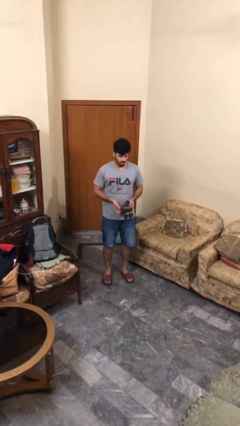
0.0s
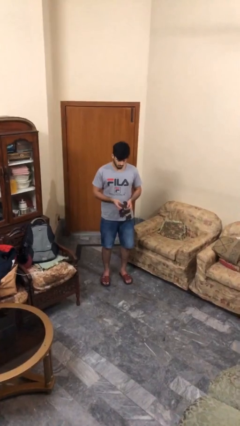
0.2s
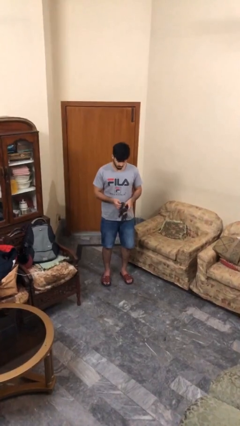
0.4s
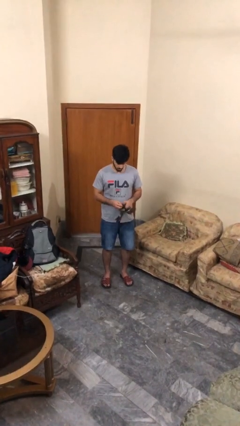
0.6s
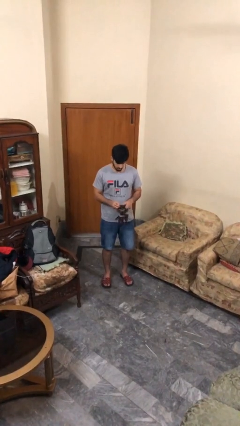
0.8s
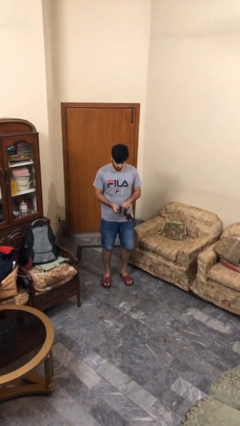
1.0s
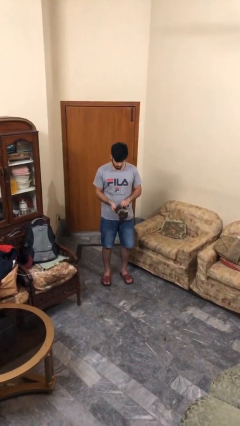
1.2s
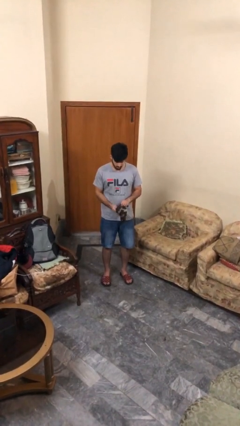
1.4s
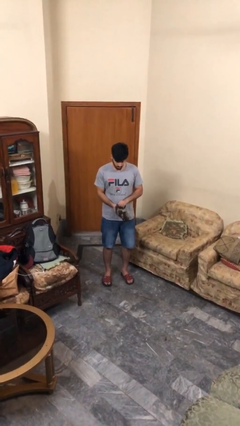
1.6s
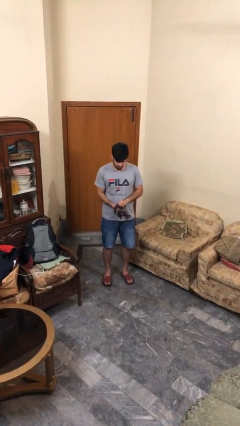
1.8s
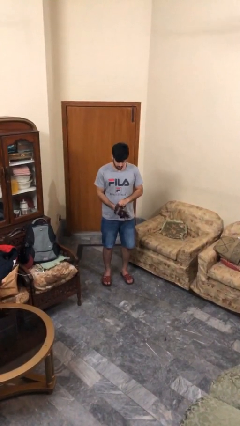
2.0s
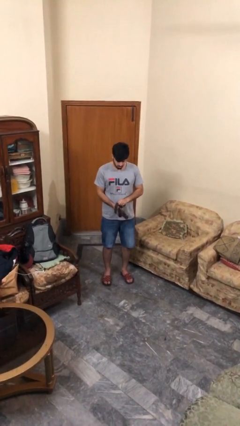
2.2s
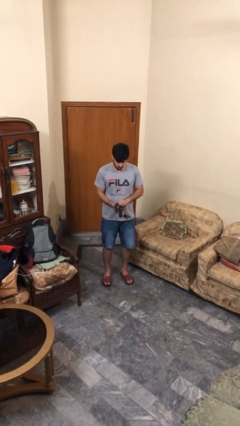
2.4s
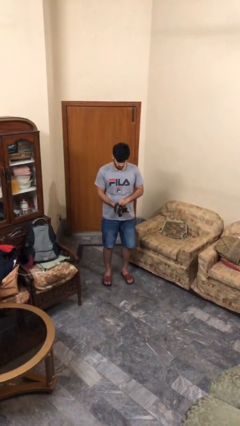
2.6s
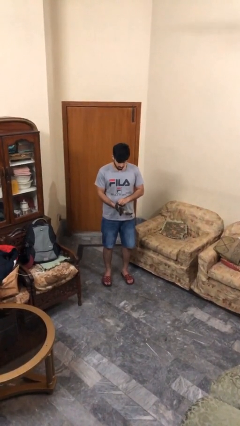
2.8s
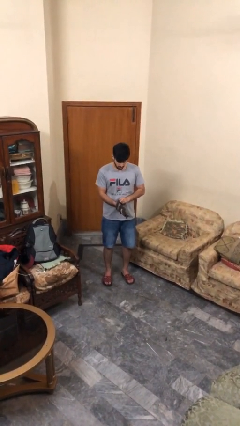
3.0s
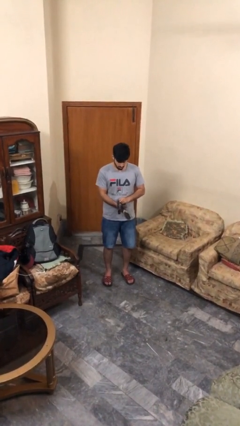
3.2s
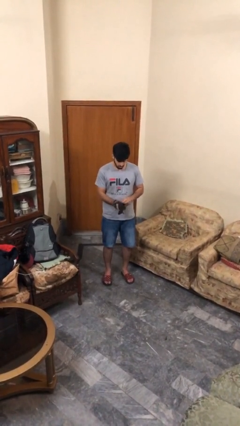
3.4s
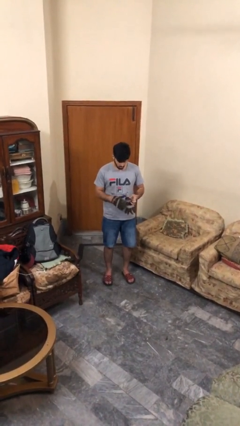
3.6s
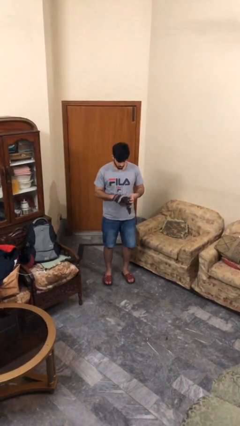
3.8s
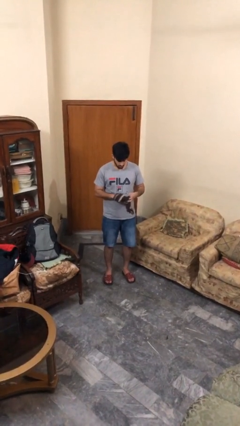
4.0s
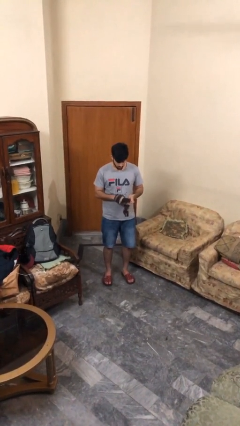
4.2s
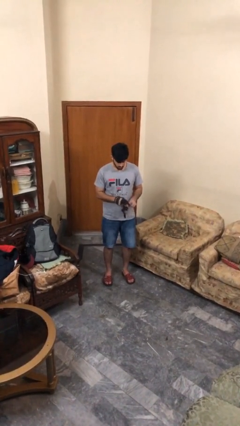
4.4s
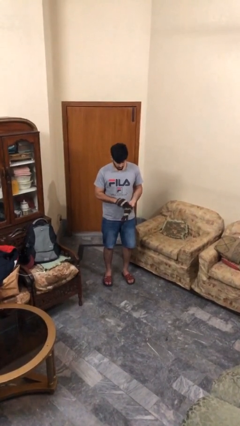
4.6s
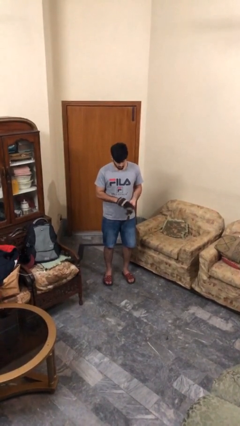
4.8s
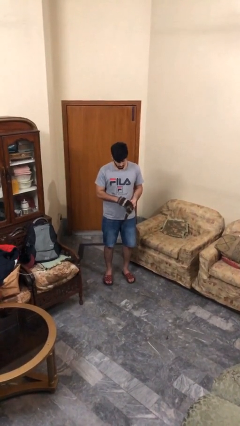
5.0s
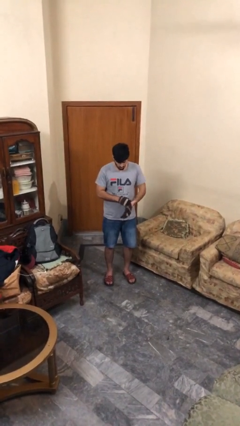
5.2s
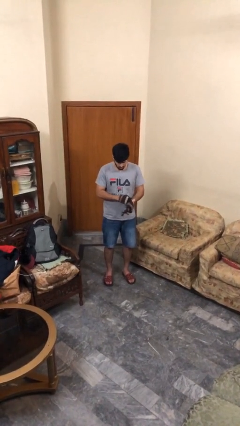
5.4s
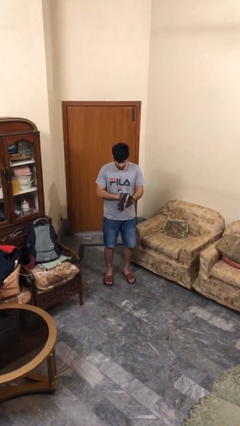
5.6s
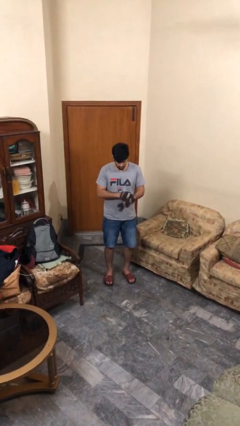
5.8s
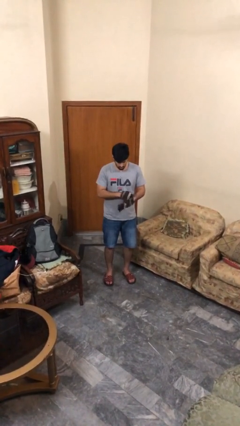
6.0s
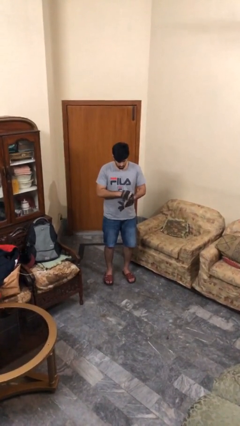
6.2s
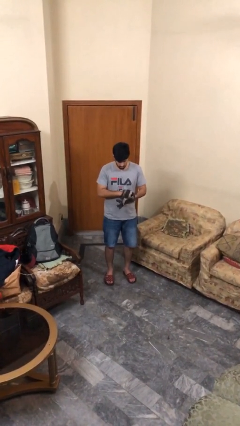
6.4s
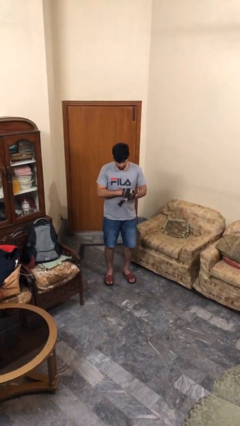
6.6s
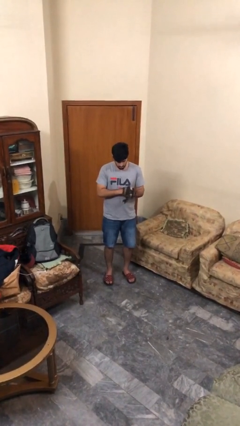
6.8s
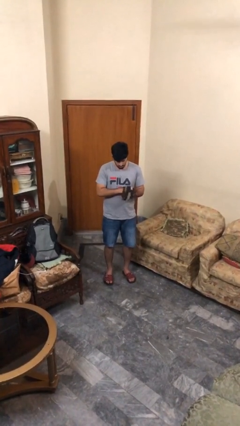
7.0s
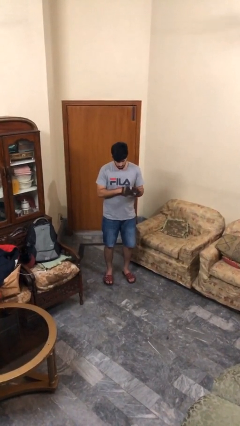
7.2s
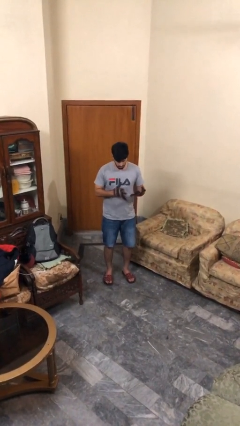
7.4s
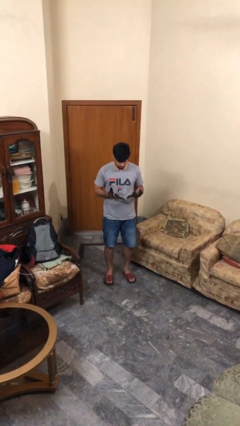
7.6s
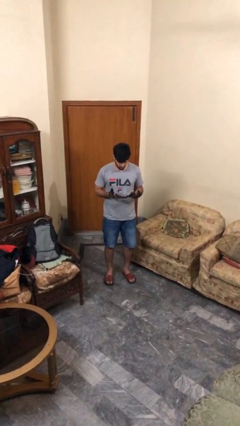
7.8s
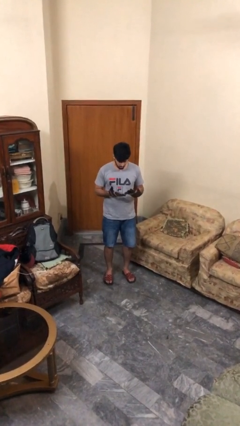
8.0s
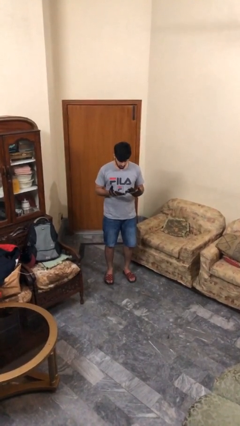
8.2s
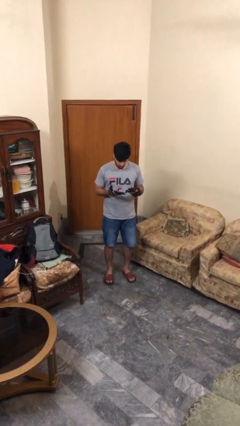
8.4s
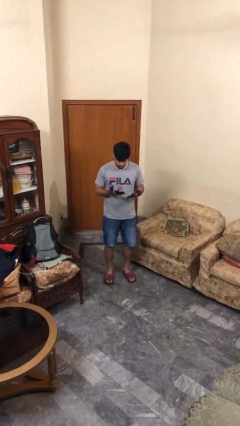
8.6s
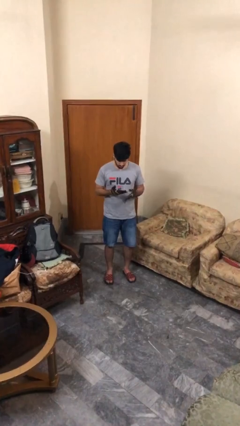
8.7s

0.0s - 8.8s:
person puts on gloves

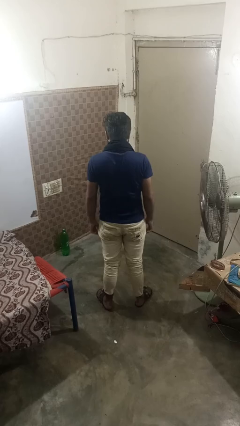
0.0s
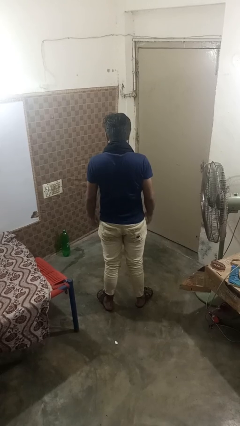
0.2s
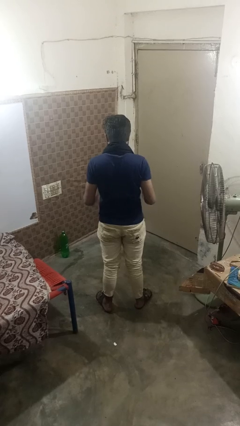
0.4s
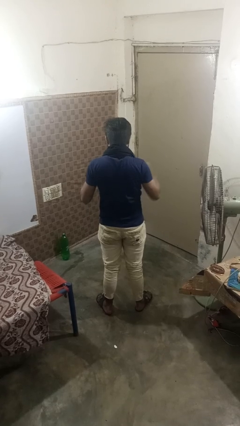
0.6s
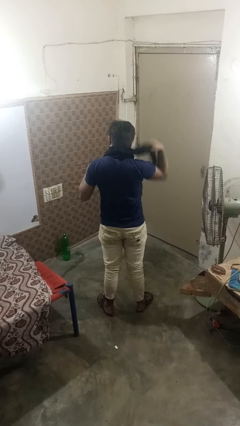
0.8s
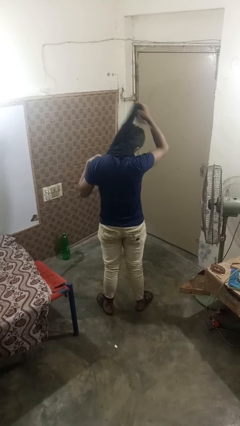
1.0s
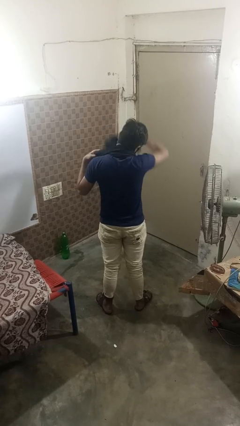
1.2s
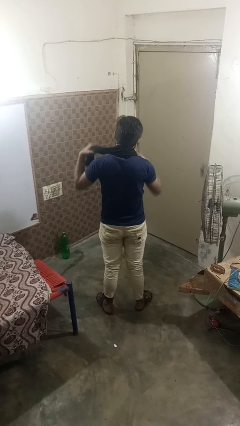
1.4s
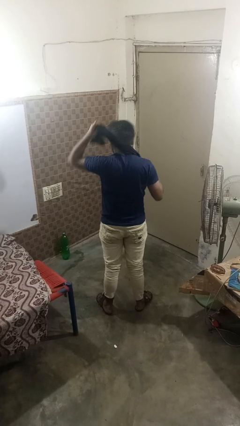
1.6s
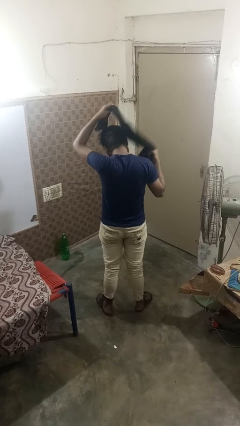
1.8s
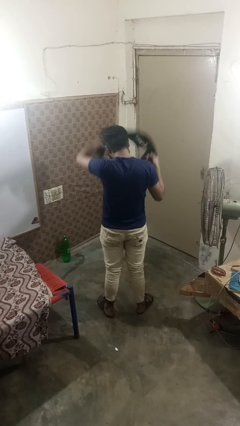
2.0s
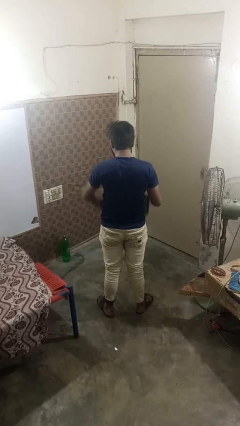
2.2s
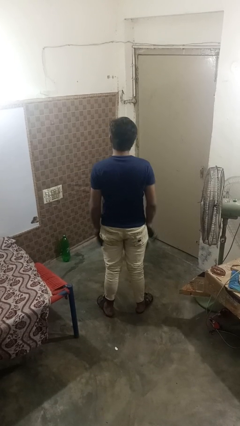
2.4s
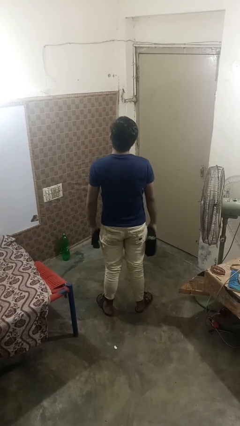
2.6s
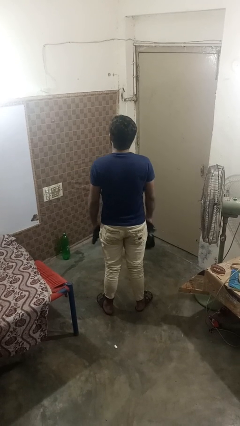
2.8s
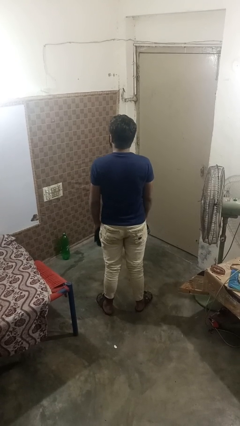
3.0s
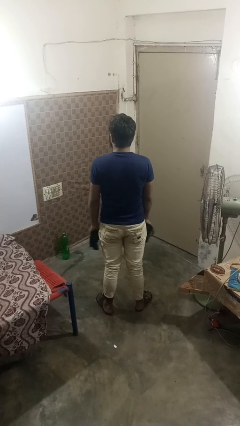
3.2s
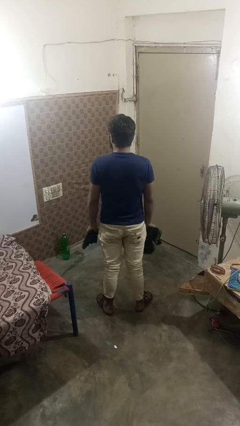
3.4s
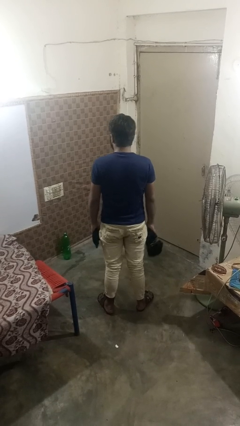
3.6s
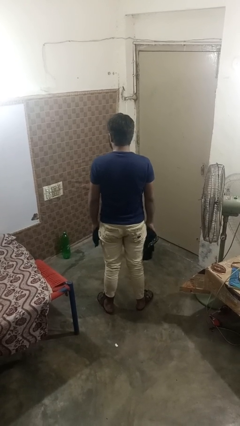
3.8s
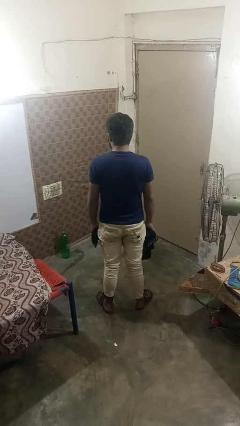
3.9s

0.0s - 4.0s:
person takes off scarf

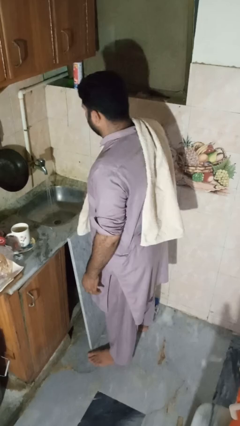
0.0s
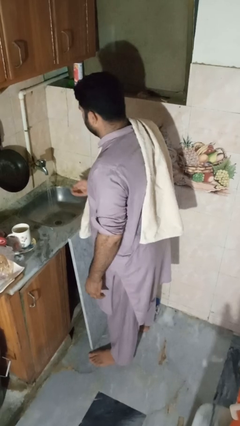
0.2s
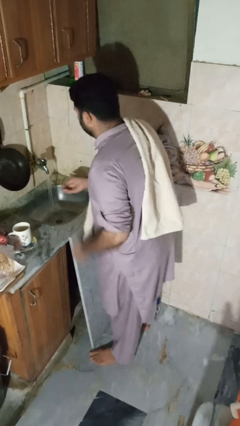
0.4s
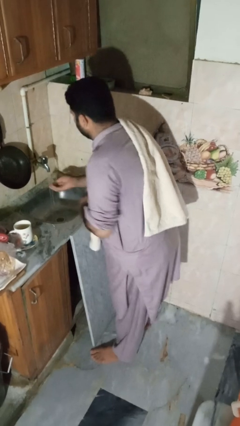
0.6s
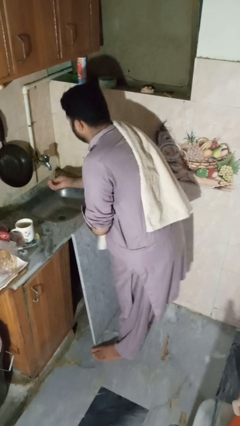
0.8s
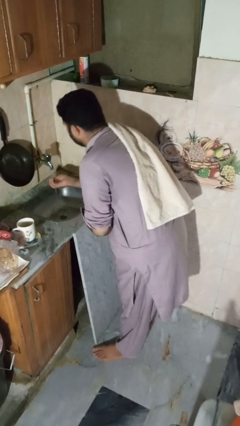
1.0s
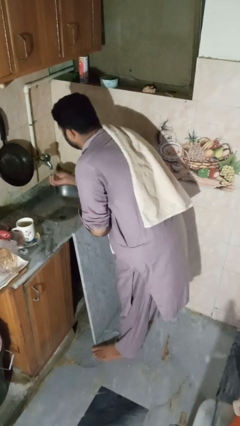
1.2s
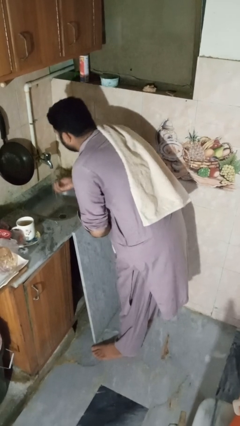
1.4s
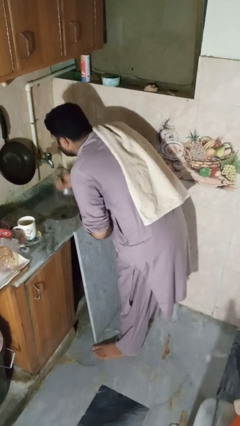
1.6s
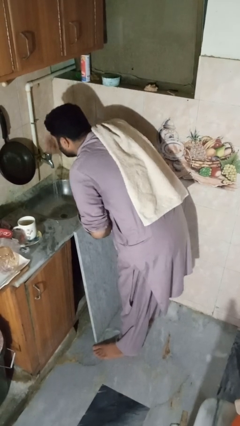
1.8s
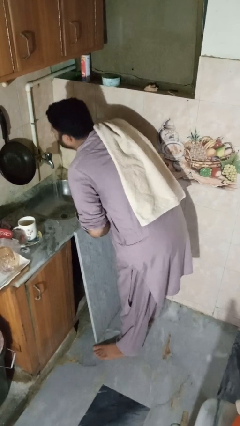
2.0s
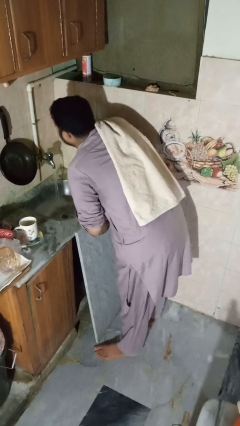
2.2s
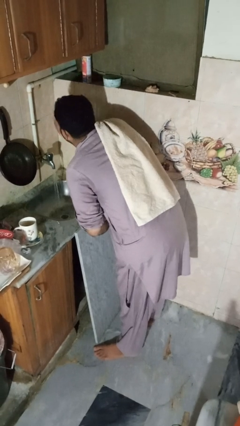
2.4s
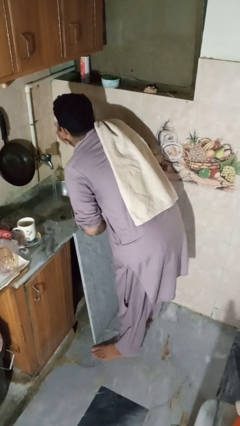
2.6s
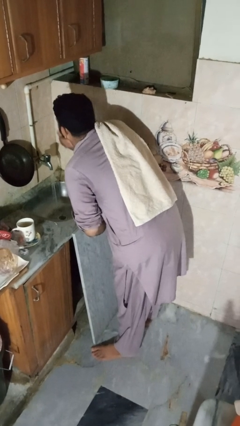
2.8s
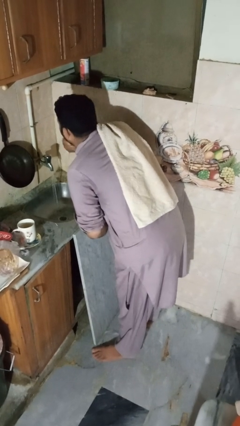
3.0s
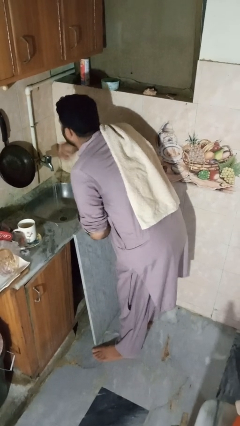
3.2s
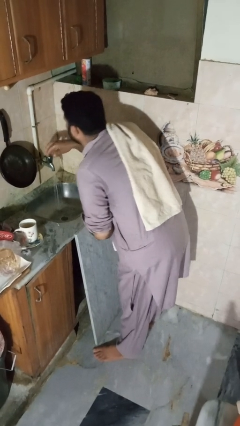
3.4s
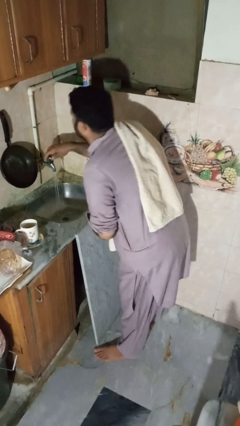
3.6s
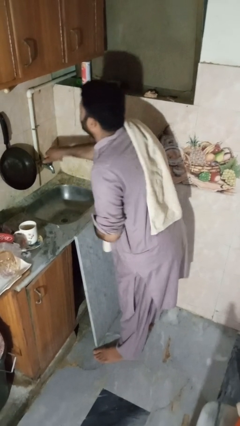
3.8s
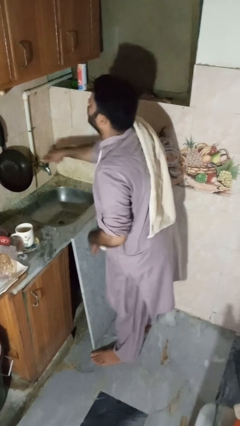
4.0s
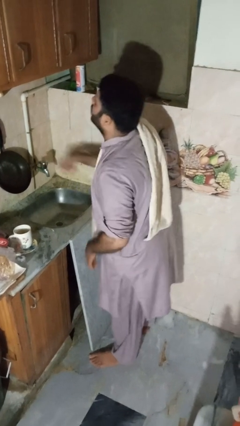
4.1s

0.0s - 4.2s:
person washes face

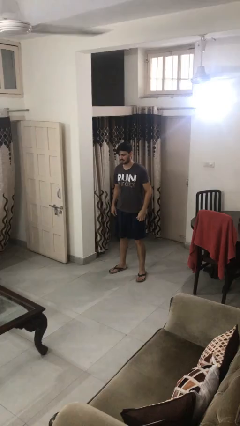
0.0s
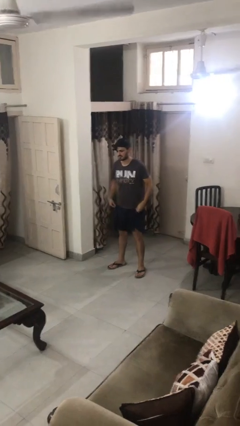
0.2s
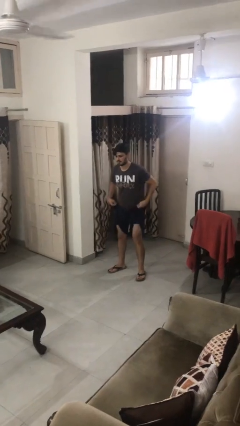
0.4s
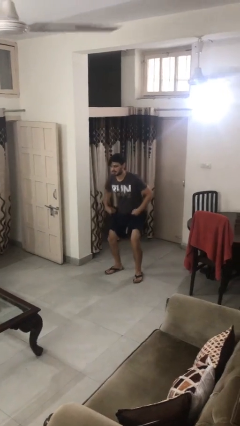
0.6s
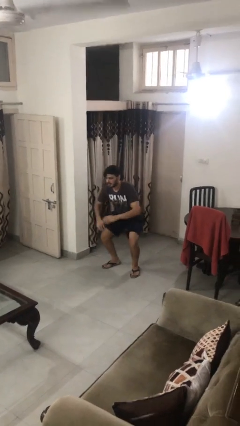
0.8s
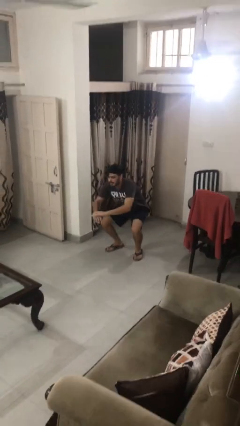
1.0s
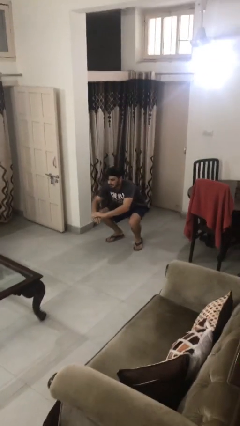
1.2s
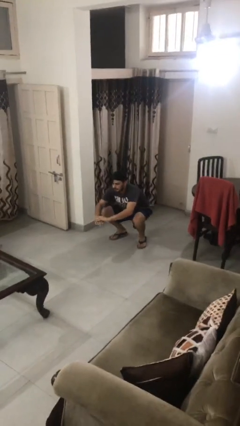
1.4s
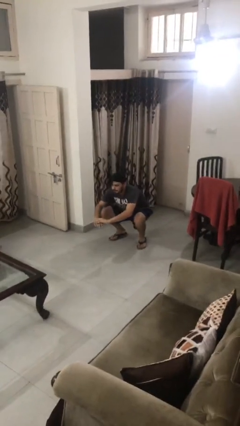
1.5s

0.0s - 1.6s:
person squats
